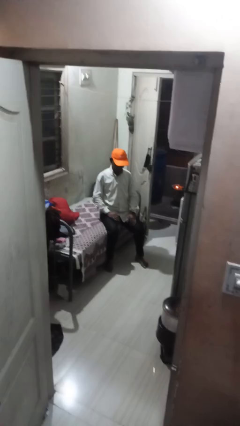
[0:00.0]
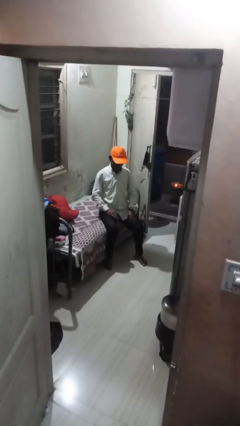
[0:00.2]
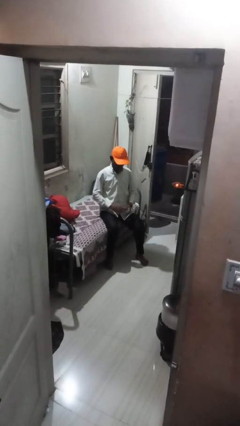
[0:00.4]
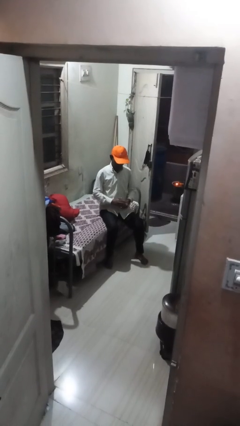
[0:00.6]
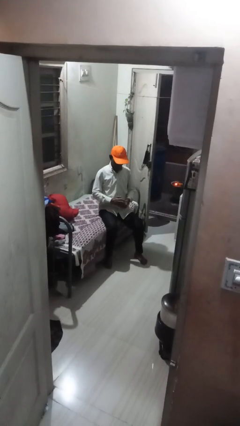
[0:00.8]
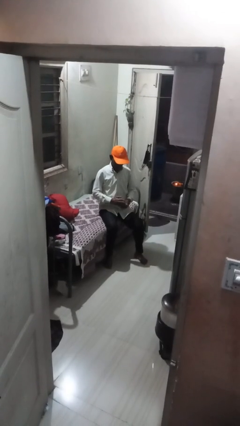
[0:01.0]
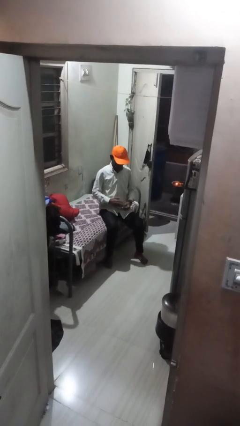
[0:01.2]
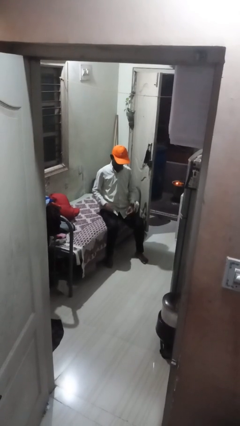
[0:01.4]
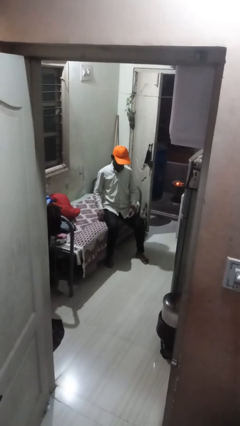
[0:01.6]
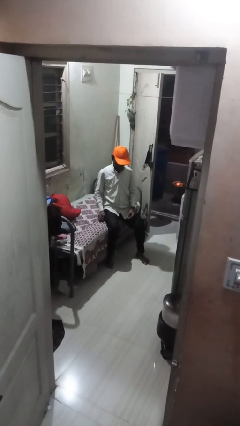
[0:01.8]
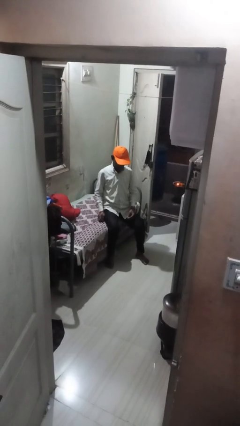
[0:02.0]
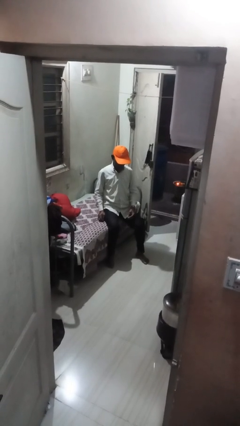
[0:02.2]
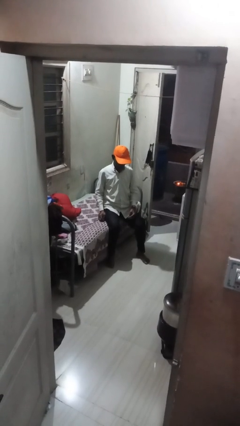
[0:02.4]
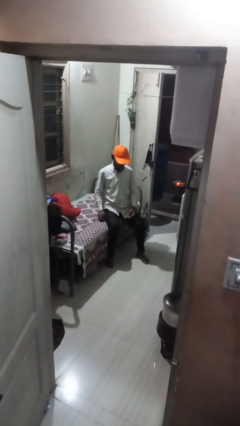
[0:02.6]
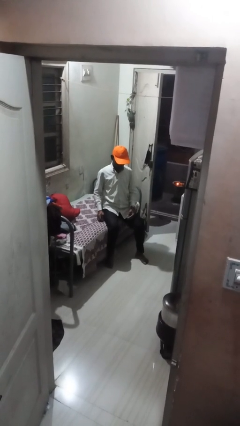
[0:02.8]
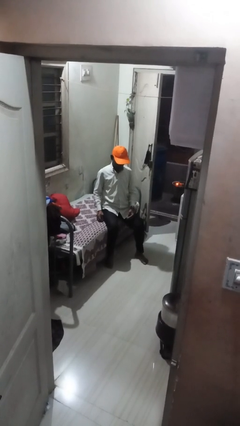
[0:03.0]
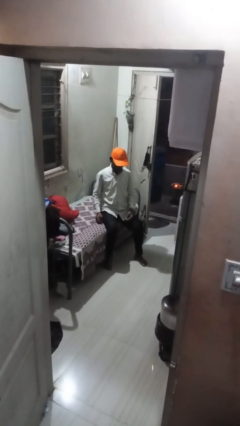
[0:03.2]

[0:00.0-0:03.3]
person takes off ring

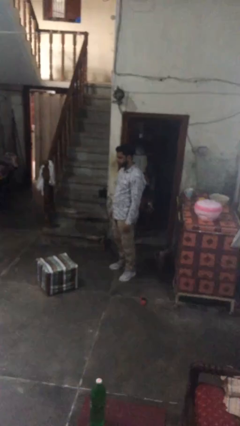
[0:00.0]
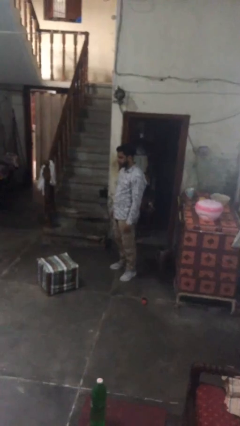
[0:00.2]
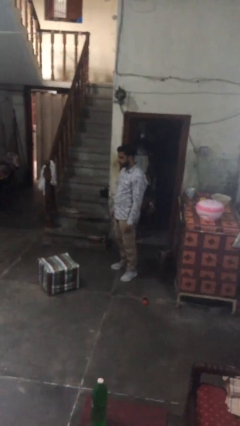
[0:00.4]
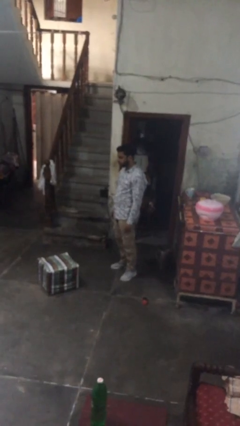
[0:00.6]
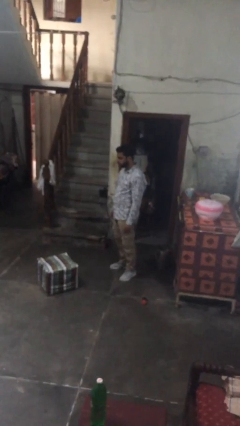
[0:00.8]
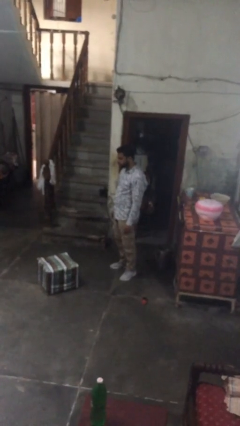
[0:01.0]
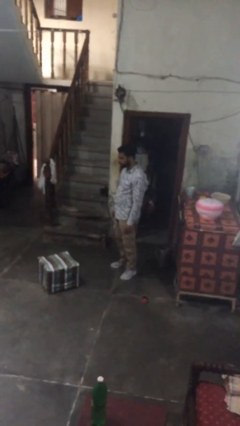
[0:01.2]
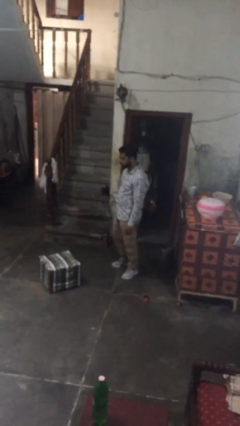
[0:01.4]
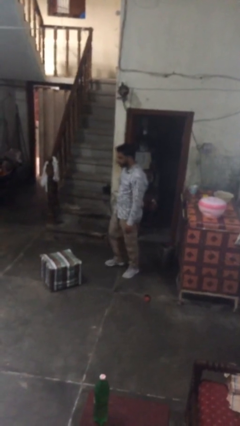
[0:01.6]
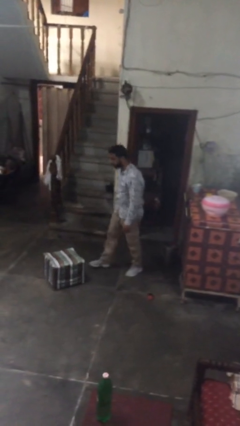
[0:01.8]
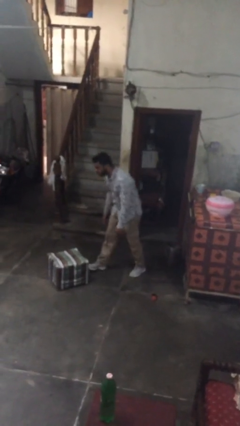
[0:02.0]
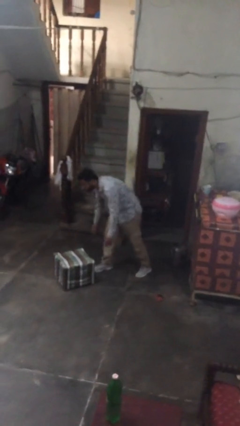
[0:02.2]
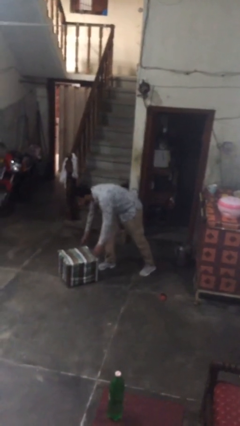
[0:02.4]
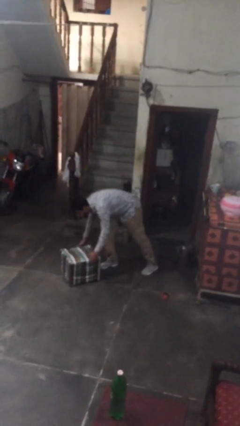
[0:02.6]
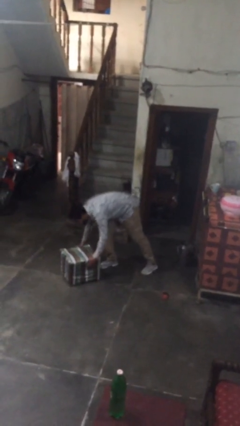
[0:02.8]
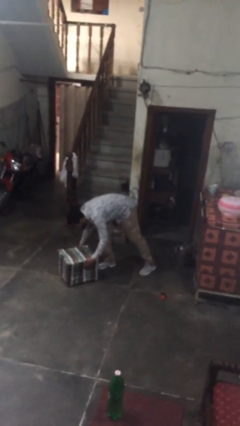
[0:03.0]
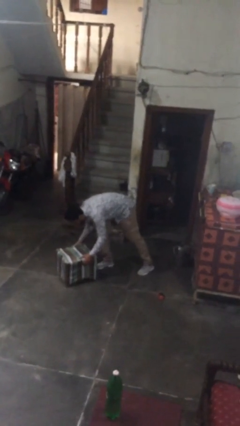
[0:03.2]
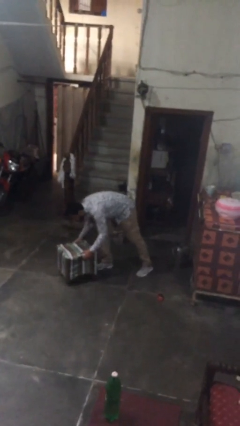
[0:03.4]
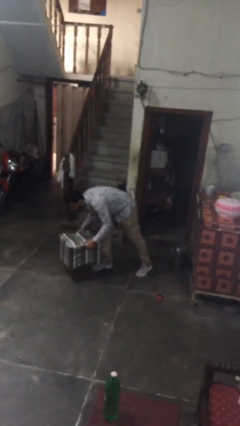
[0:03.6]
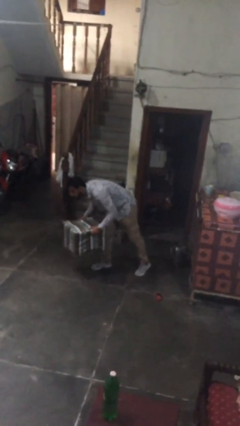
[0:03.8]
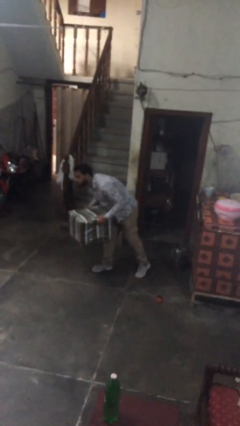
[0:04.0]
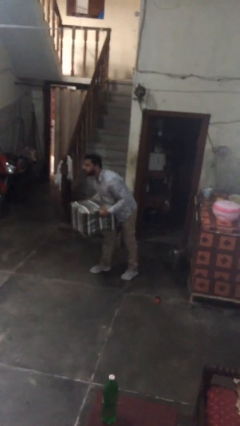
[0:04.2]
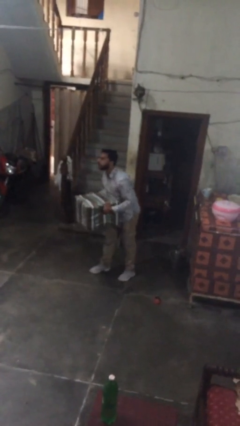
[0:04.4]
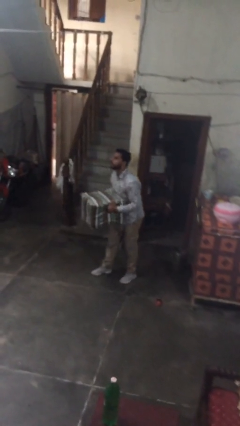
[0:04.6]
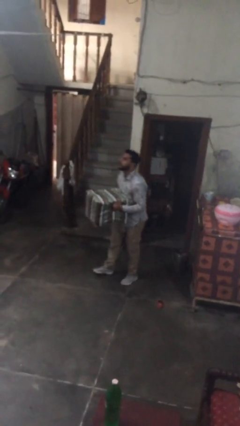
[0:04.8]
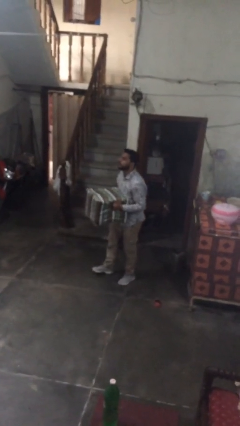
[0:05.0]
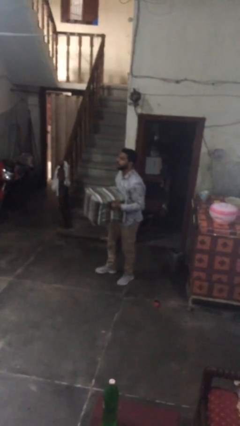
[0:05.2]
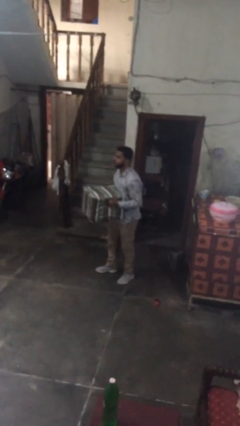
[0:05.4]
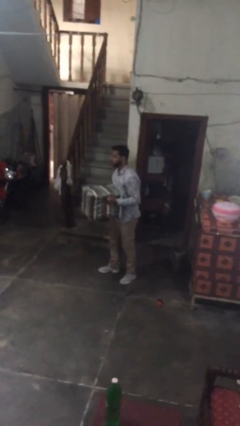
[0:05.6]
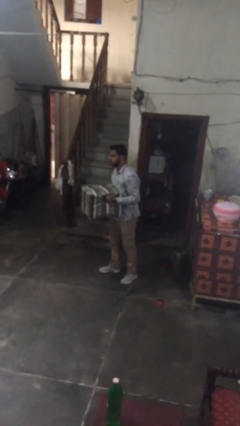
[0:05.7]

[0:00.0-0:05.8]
person picks up object from floor

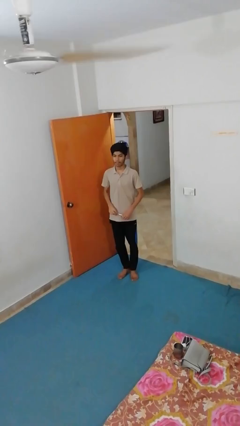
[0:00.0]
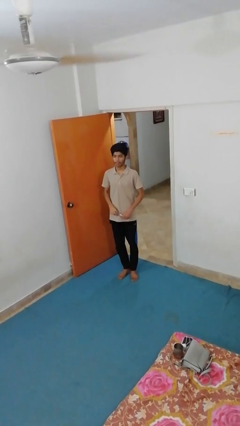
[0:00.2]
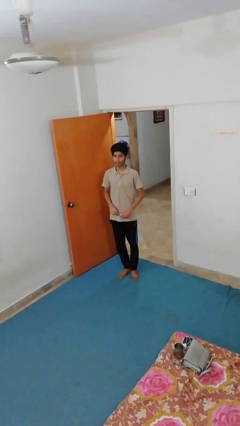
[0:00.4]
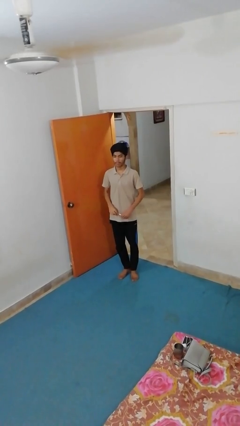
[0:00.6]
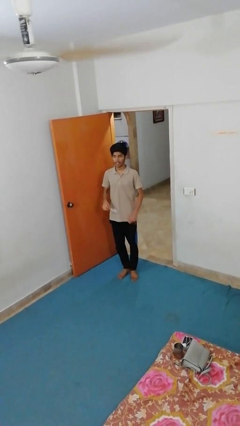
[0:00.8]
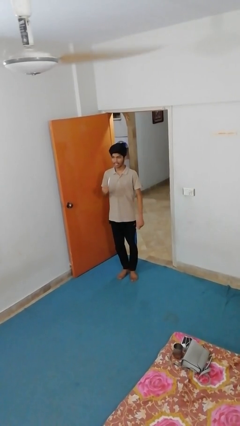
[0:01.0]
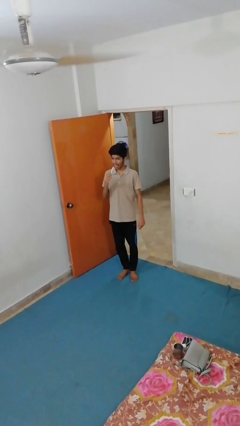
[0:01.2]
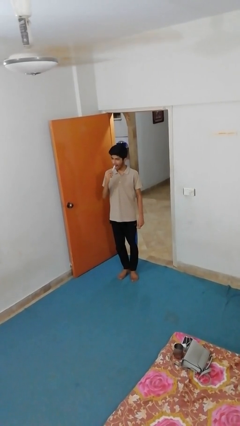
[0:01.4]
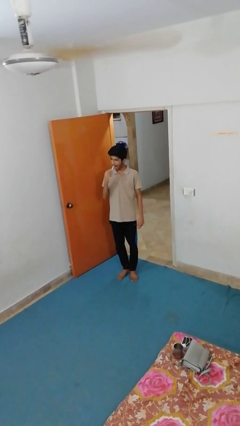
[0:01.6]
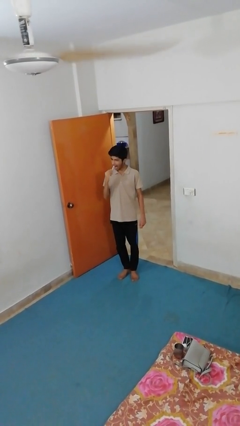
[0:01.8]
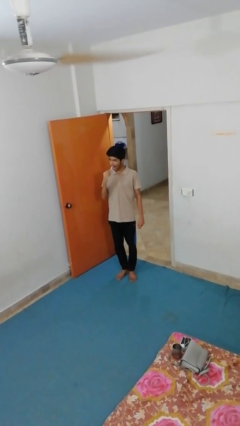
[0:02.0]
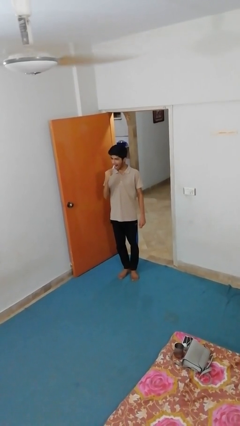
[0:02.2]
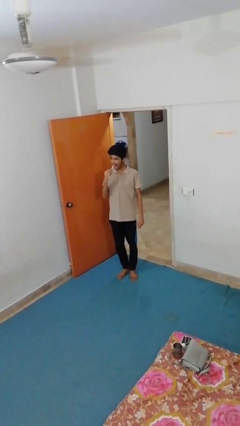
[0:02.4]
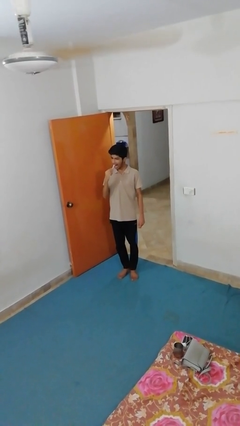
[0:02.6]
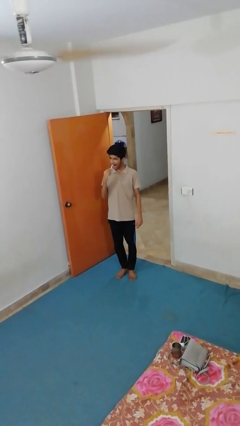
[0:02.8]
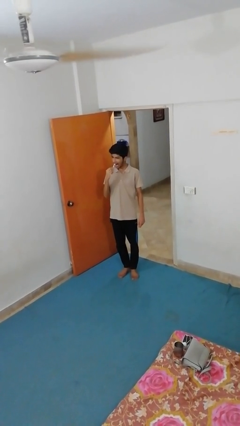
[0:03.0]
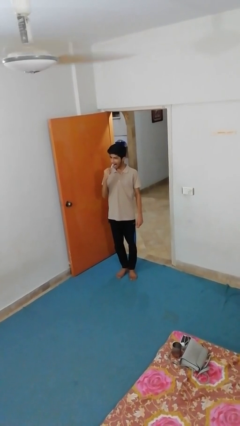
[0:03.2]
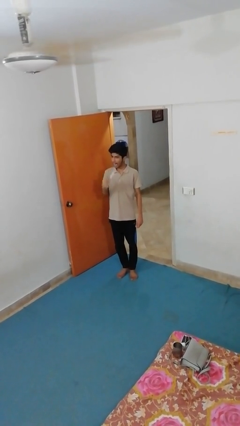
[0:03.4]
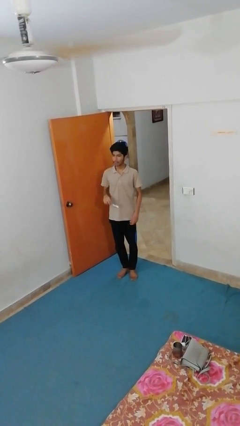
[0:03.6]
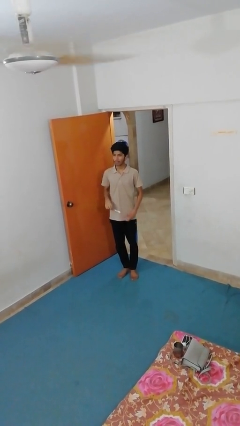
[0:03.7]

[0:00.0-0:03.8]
person brushes teeth

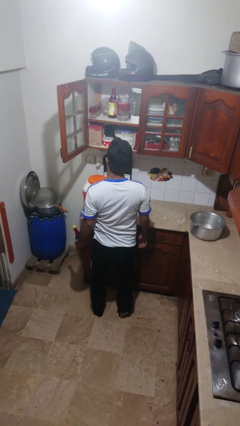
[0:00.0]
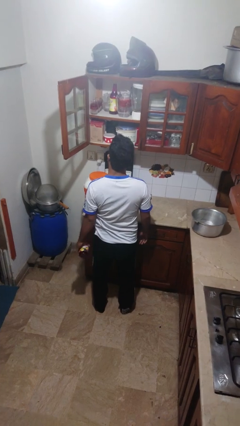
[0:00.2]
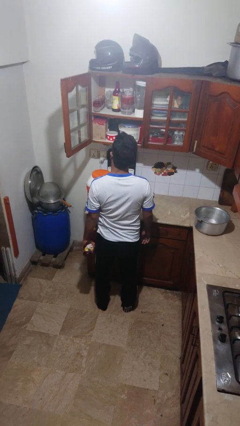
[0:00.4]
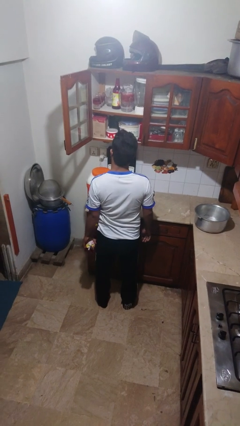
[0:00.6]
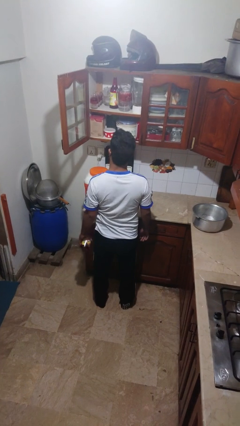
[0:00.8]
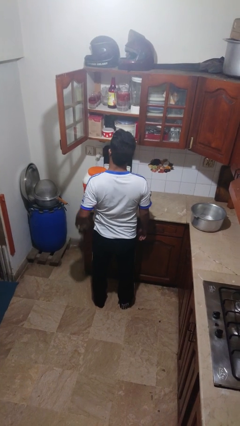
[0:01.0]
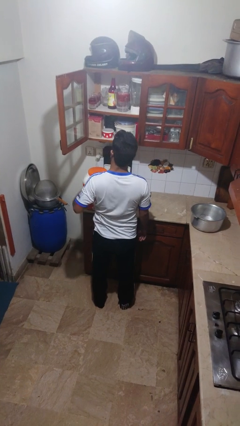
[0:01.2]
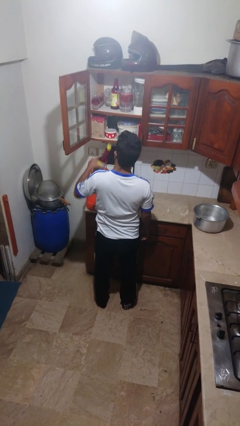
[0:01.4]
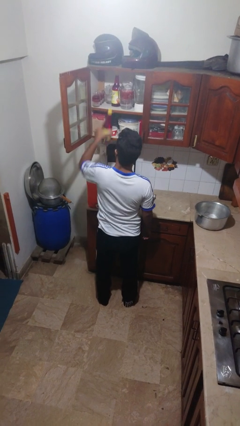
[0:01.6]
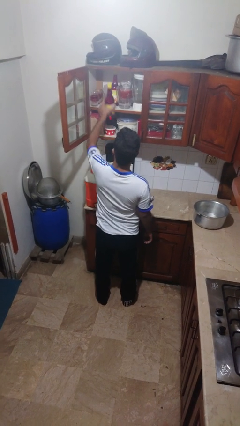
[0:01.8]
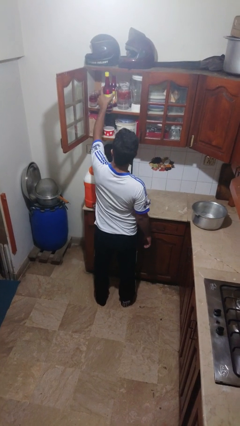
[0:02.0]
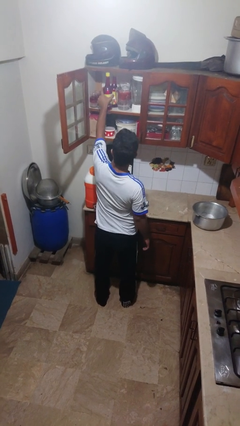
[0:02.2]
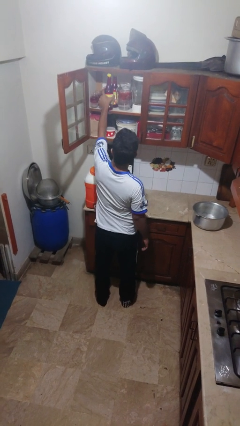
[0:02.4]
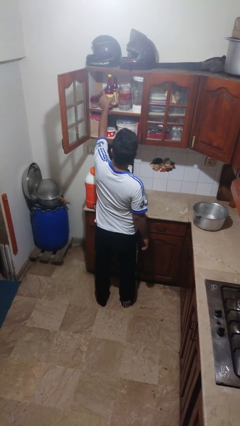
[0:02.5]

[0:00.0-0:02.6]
person puts down object into cabinet

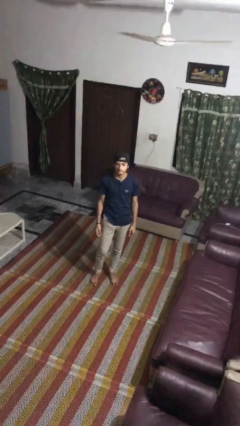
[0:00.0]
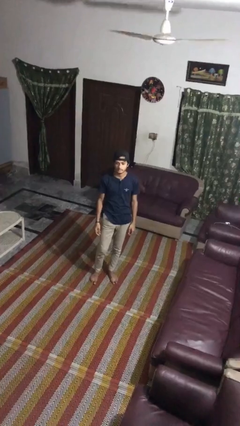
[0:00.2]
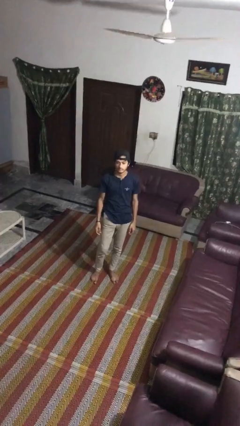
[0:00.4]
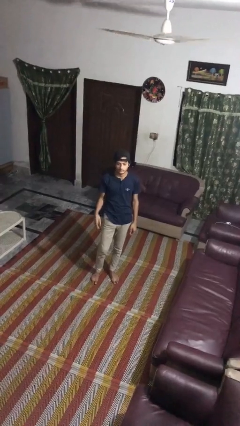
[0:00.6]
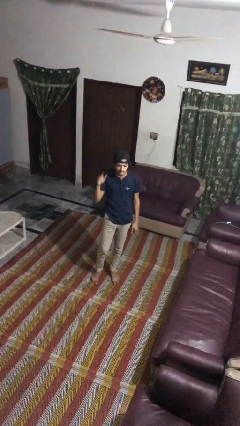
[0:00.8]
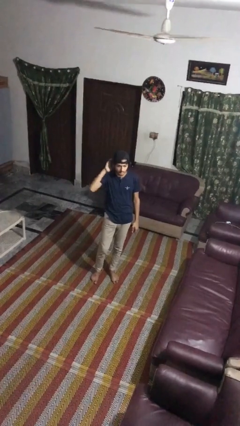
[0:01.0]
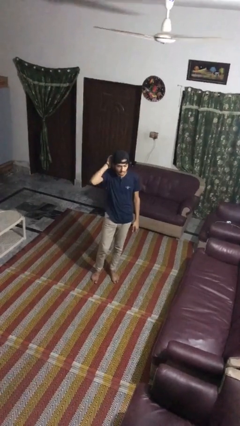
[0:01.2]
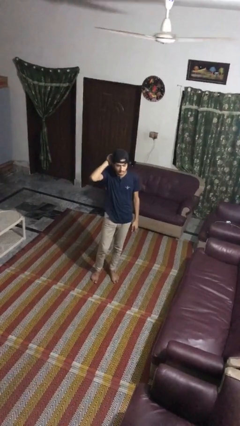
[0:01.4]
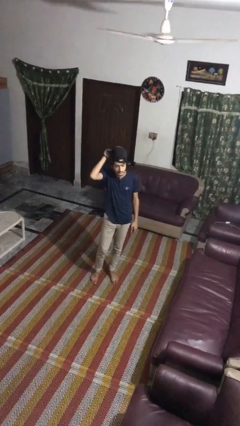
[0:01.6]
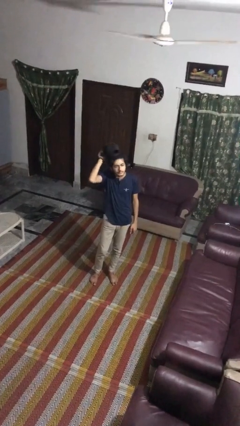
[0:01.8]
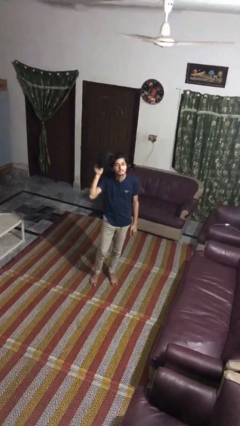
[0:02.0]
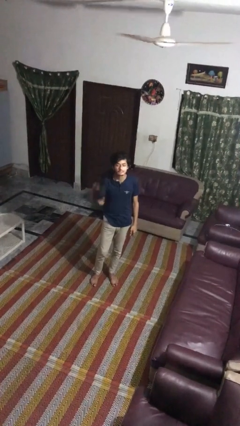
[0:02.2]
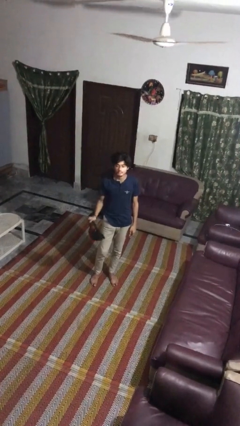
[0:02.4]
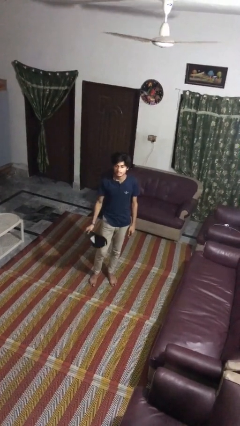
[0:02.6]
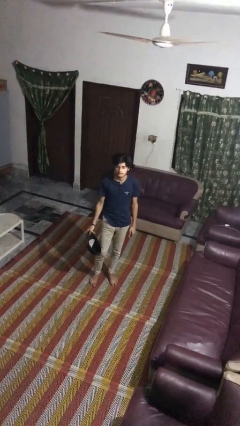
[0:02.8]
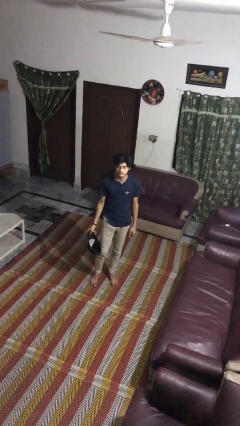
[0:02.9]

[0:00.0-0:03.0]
person takes off hat
